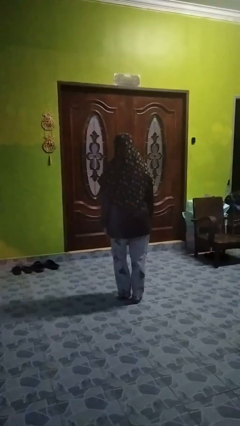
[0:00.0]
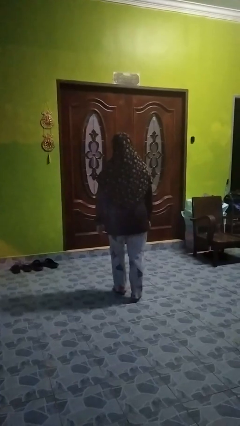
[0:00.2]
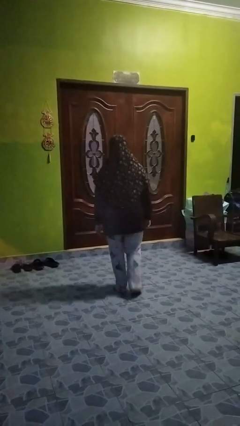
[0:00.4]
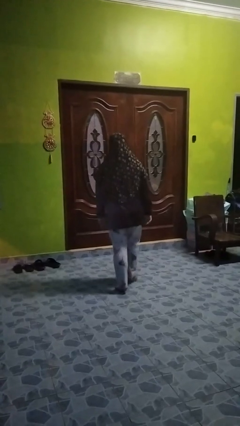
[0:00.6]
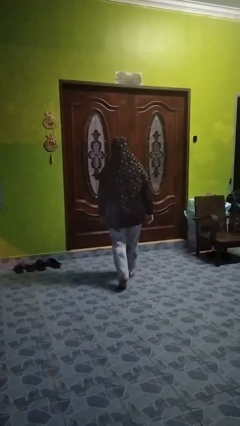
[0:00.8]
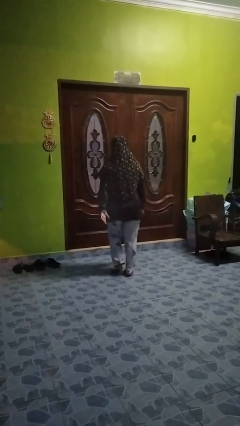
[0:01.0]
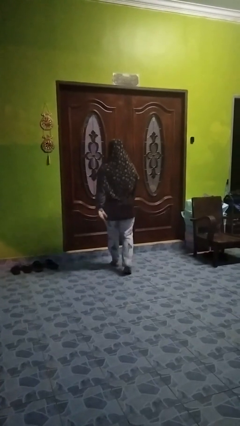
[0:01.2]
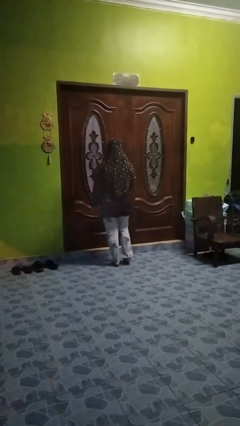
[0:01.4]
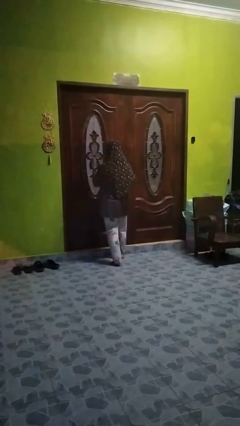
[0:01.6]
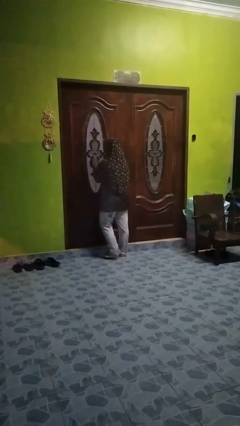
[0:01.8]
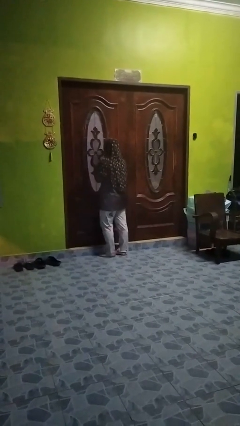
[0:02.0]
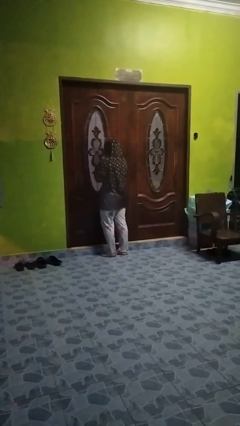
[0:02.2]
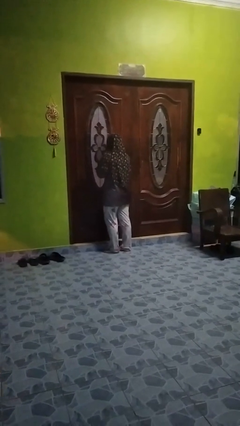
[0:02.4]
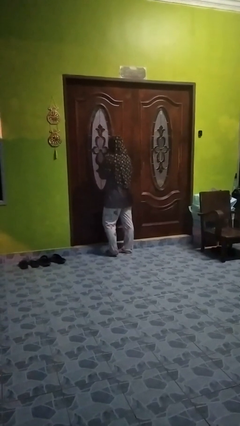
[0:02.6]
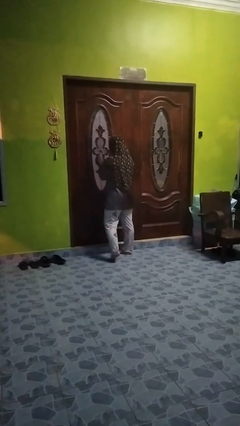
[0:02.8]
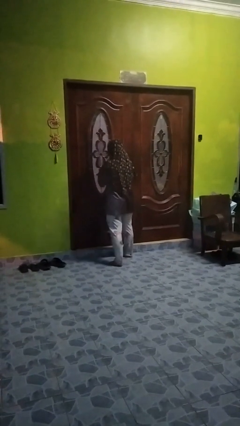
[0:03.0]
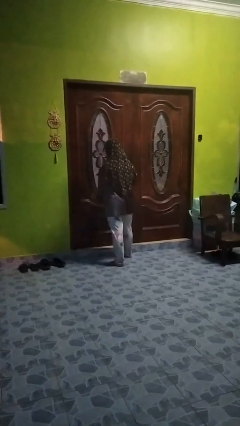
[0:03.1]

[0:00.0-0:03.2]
person bumps into wall

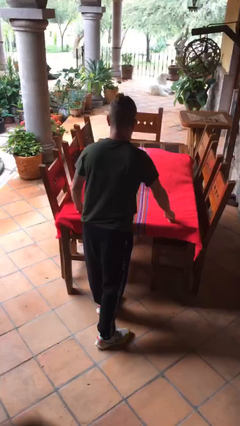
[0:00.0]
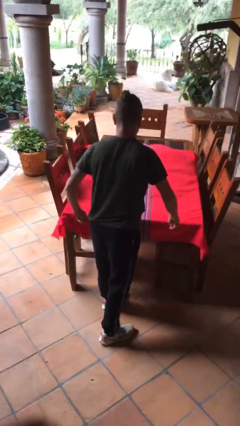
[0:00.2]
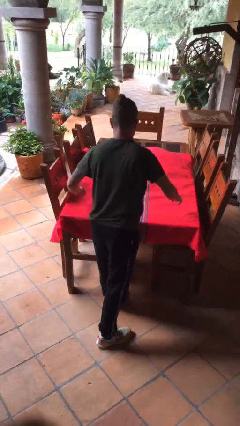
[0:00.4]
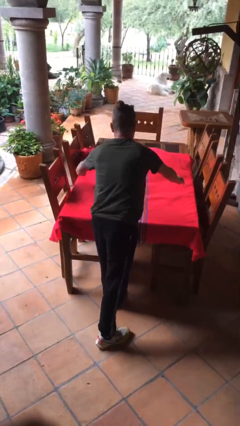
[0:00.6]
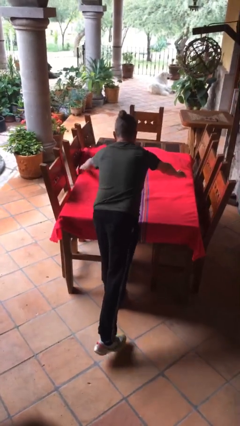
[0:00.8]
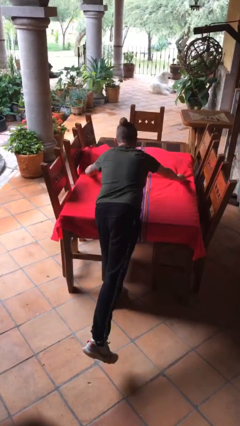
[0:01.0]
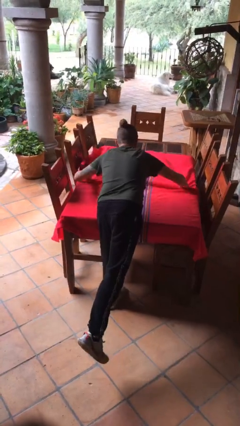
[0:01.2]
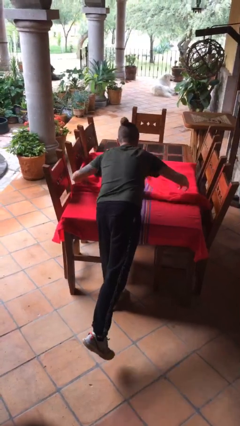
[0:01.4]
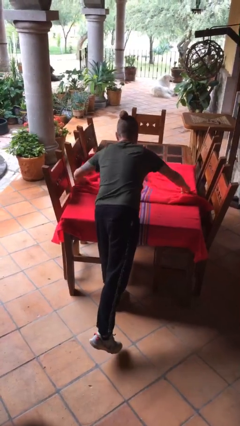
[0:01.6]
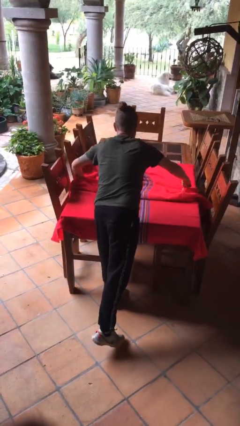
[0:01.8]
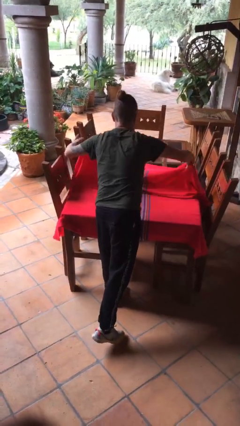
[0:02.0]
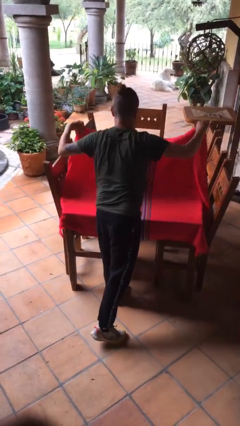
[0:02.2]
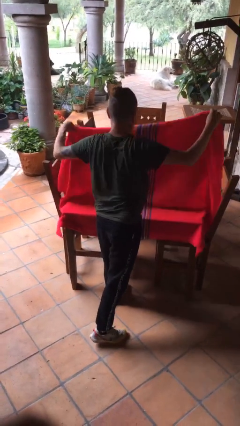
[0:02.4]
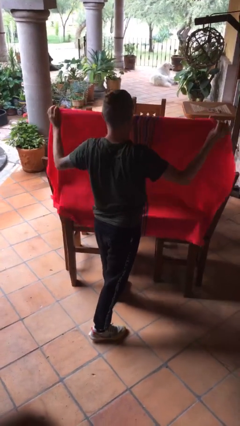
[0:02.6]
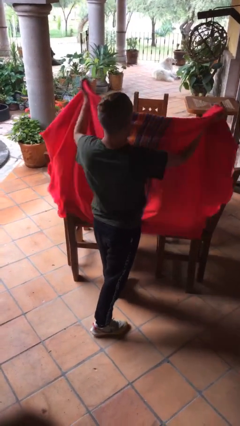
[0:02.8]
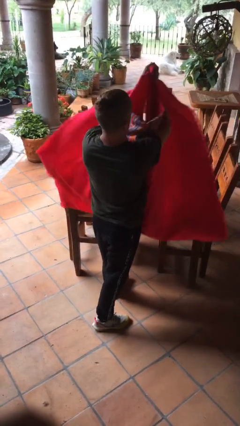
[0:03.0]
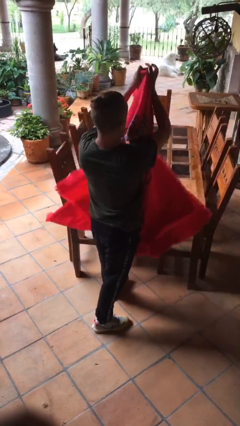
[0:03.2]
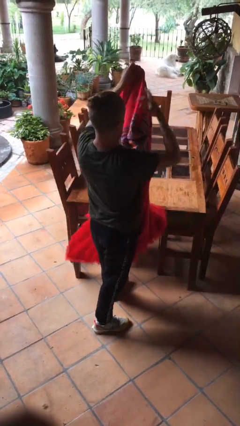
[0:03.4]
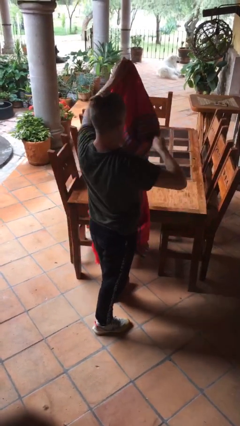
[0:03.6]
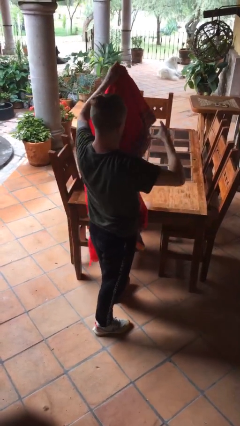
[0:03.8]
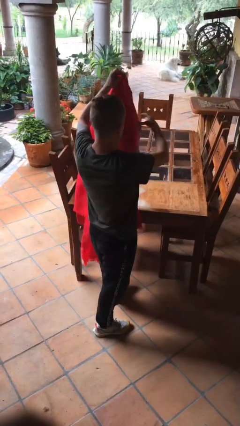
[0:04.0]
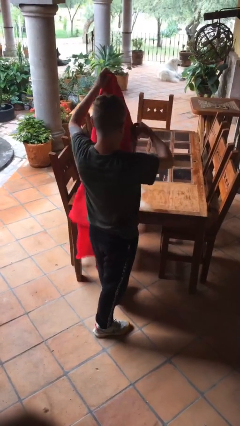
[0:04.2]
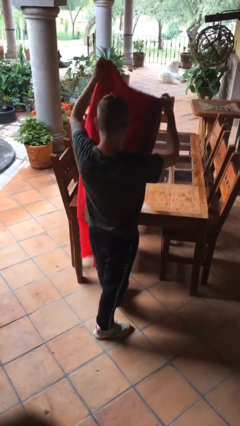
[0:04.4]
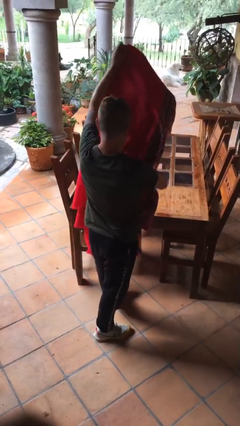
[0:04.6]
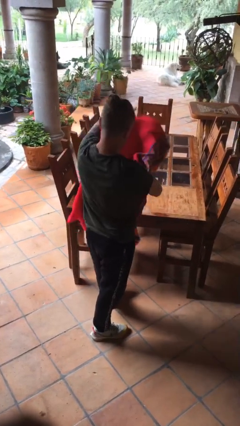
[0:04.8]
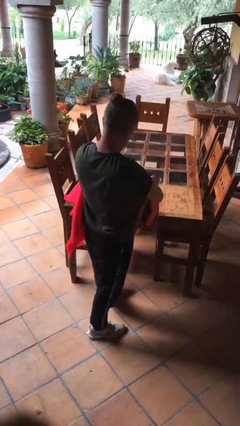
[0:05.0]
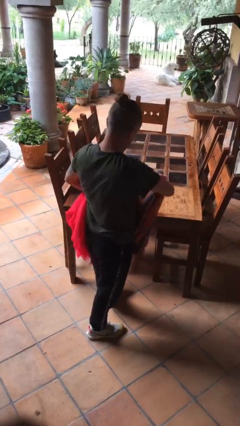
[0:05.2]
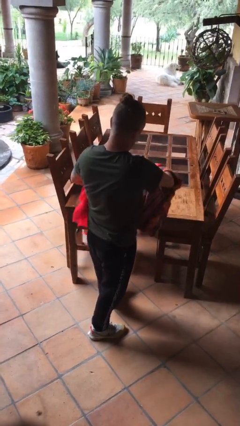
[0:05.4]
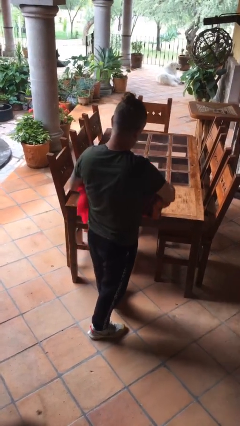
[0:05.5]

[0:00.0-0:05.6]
person folds tablecloth

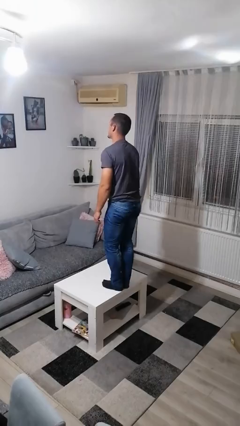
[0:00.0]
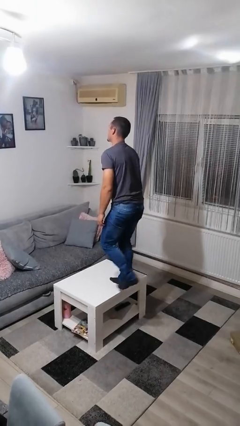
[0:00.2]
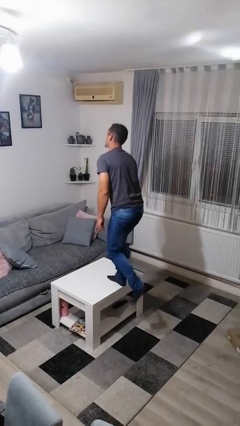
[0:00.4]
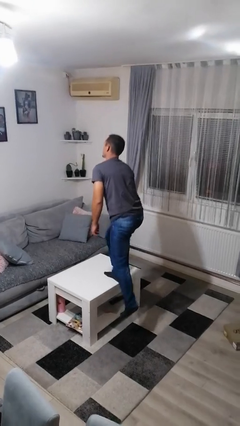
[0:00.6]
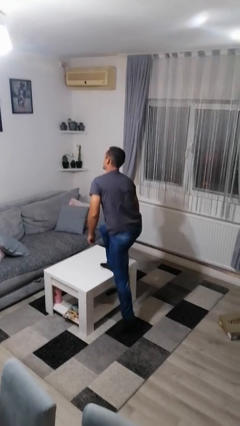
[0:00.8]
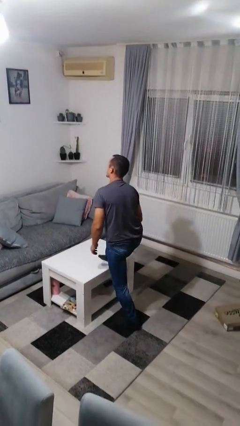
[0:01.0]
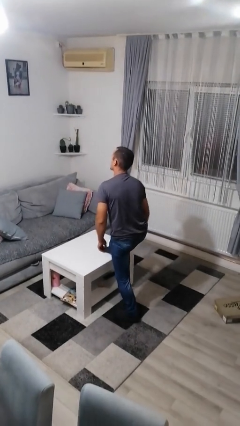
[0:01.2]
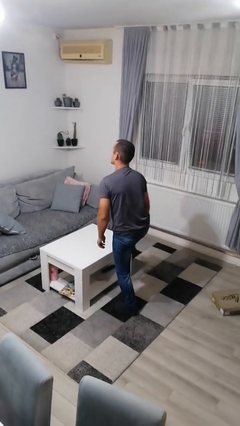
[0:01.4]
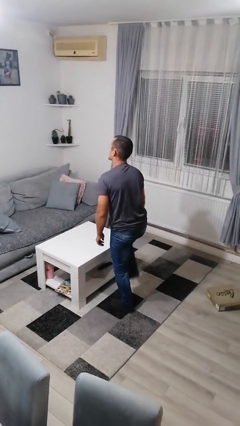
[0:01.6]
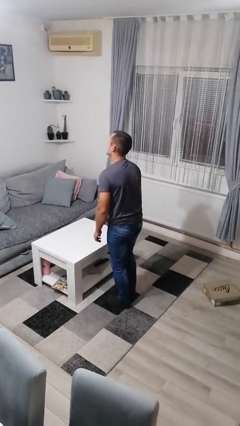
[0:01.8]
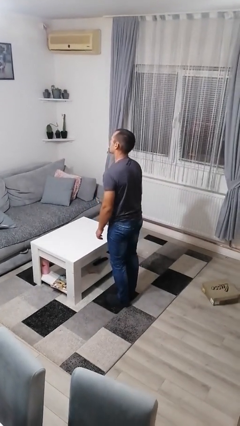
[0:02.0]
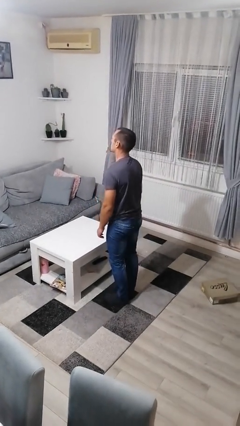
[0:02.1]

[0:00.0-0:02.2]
person climbs off table

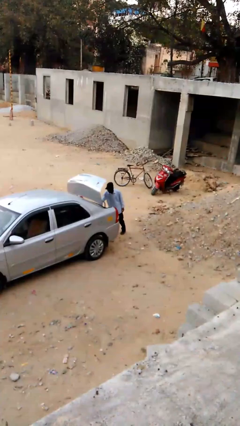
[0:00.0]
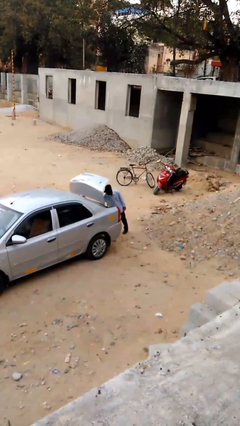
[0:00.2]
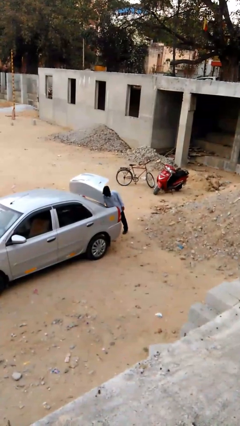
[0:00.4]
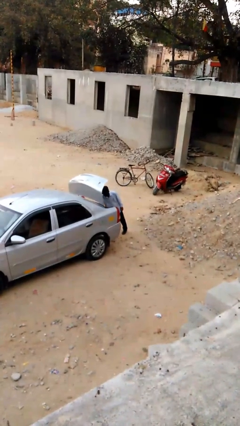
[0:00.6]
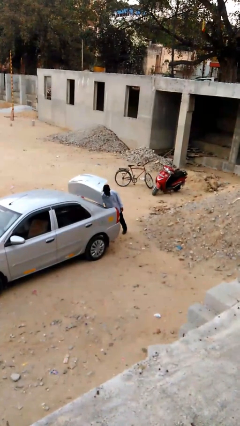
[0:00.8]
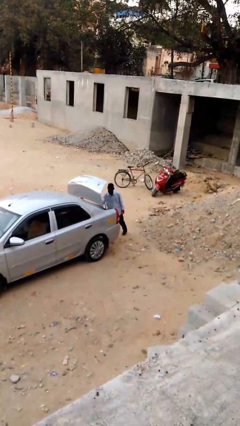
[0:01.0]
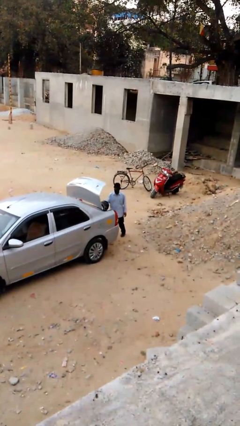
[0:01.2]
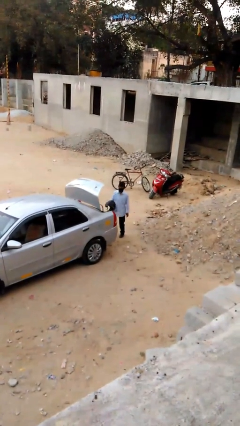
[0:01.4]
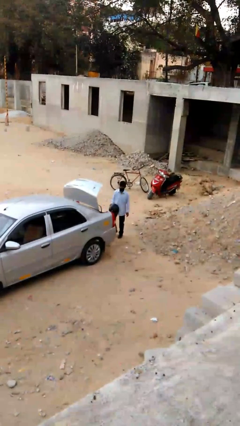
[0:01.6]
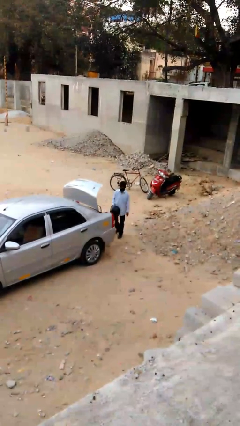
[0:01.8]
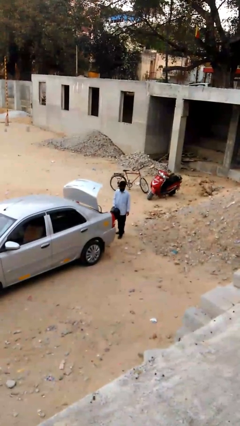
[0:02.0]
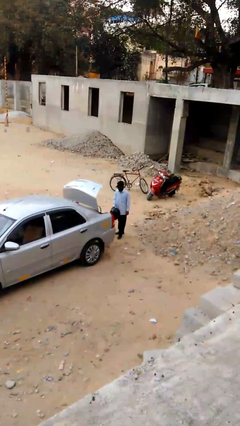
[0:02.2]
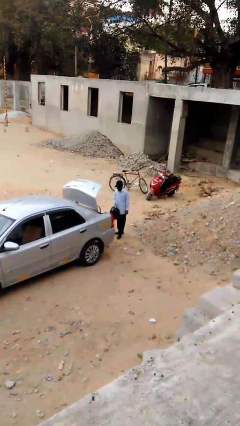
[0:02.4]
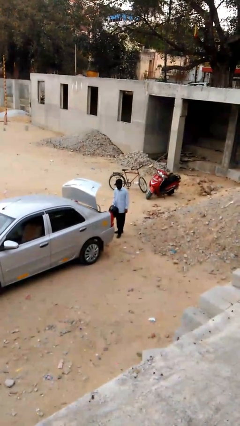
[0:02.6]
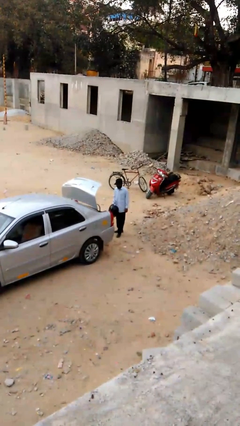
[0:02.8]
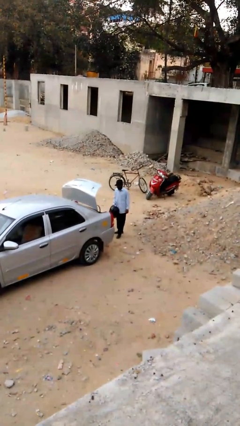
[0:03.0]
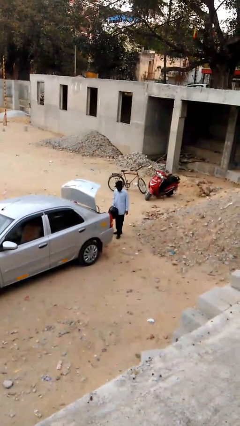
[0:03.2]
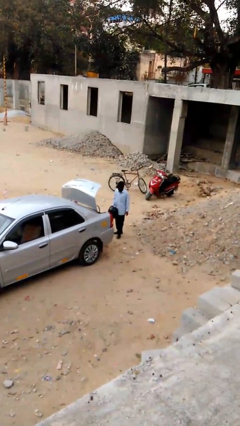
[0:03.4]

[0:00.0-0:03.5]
person unloads car

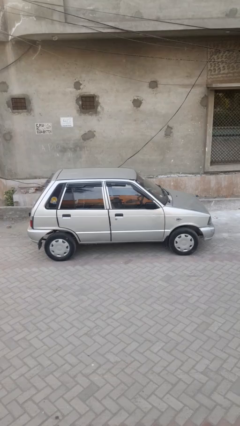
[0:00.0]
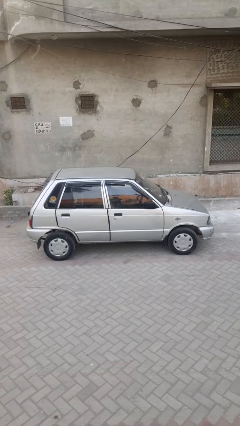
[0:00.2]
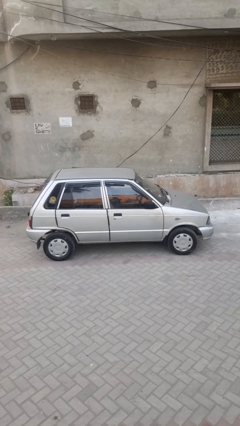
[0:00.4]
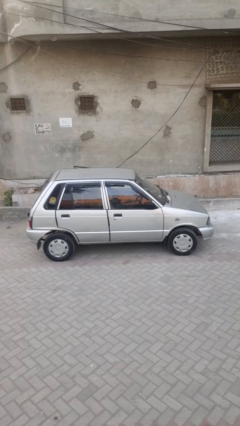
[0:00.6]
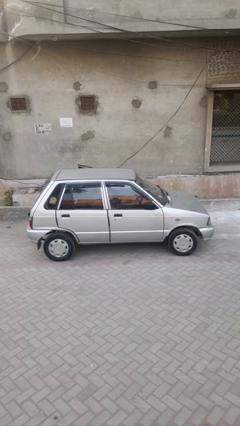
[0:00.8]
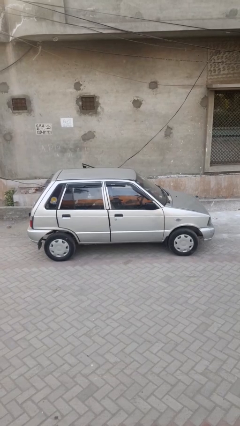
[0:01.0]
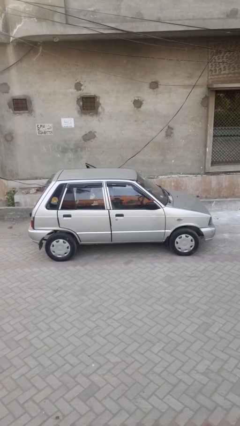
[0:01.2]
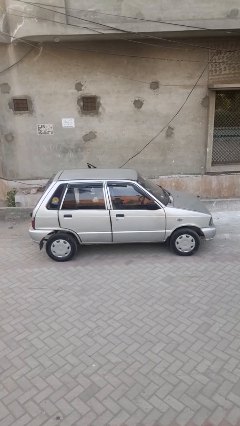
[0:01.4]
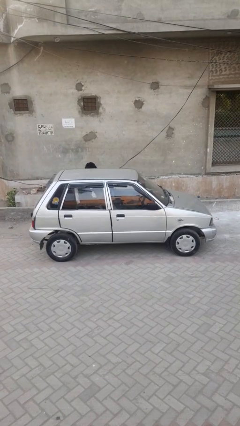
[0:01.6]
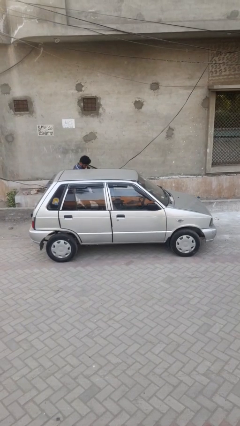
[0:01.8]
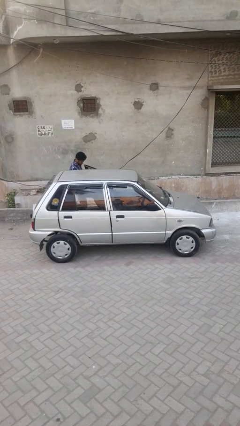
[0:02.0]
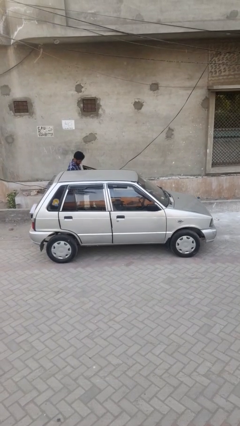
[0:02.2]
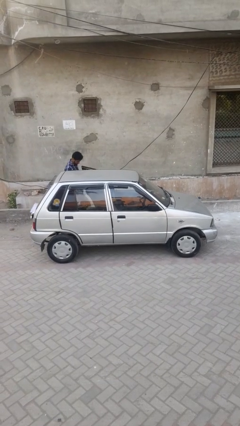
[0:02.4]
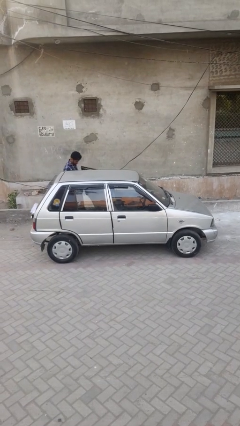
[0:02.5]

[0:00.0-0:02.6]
car drops off person

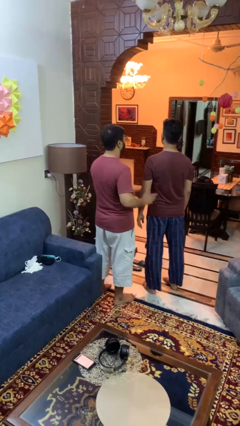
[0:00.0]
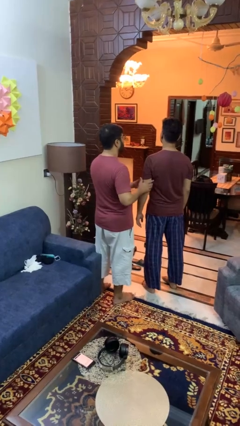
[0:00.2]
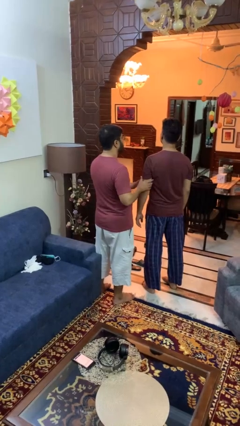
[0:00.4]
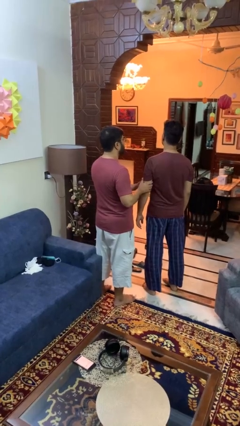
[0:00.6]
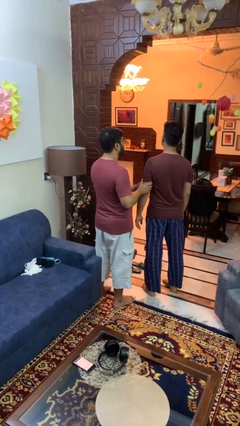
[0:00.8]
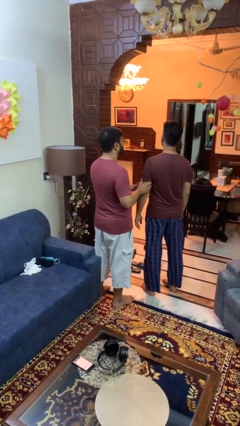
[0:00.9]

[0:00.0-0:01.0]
person grabs person by bicep
